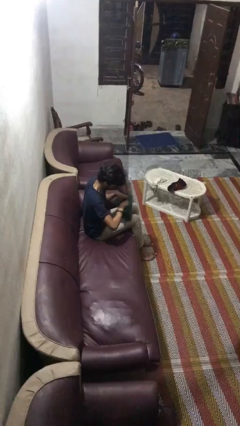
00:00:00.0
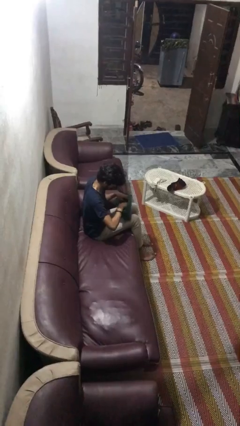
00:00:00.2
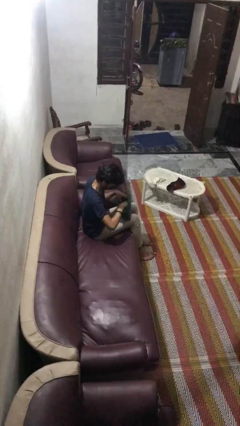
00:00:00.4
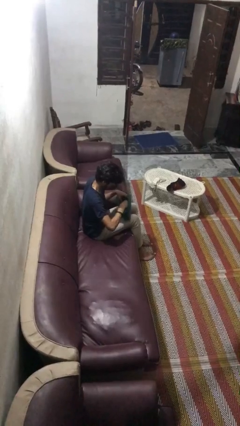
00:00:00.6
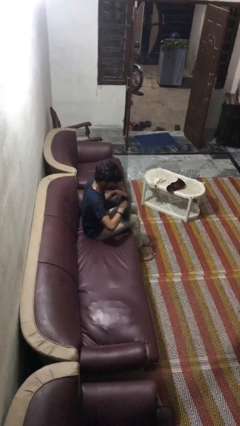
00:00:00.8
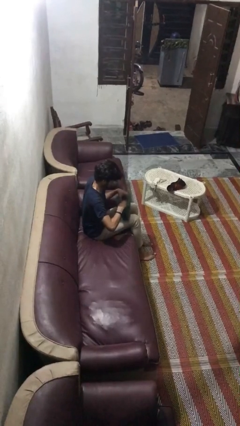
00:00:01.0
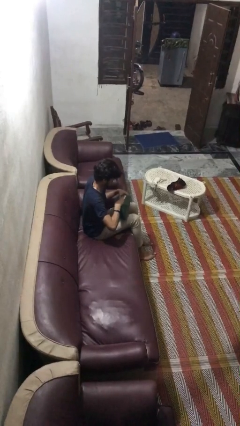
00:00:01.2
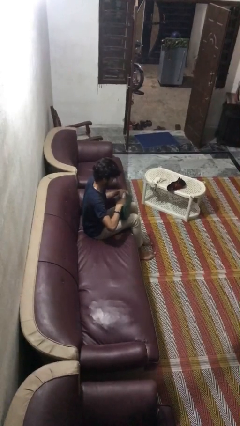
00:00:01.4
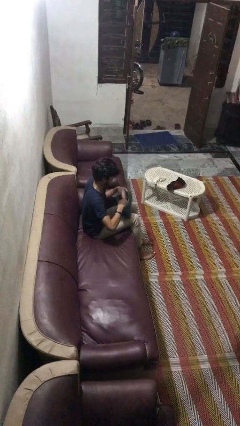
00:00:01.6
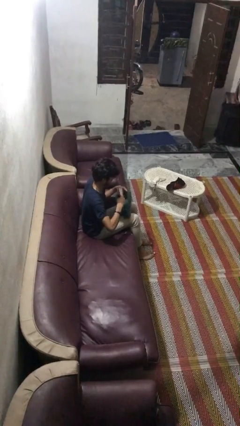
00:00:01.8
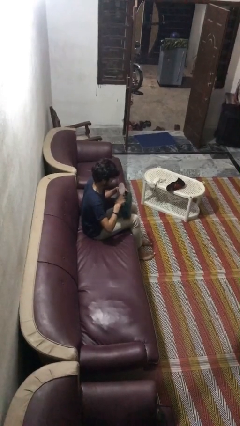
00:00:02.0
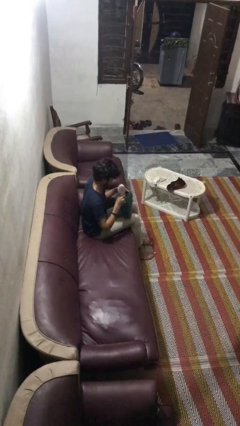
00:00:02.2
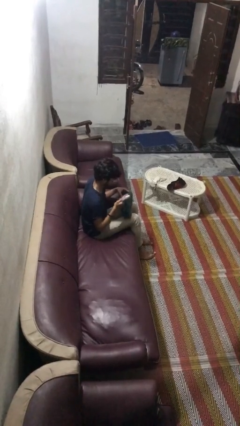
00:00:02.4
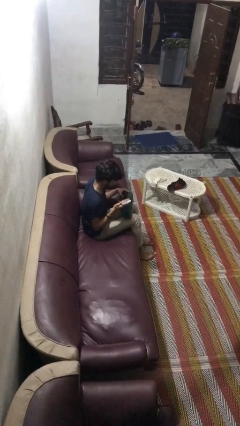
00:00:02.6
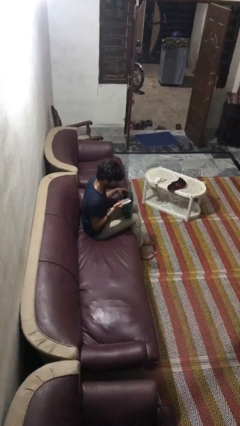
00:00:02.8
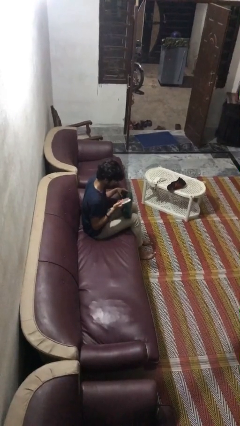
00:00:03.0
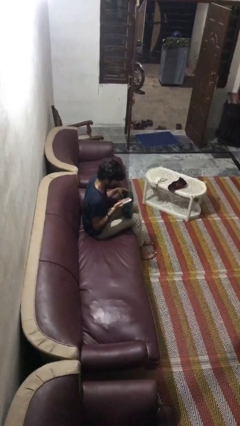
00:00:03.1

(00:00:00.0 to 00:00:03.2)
person takes object from purse

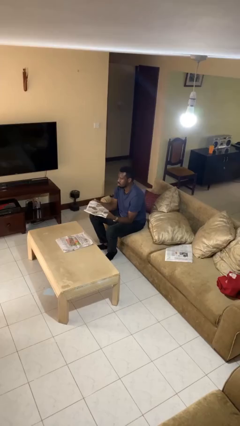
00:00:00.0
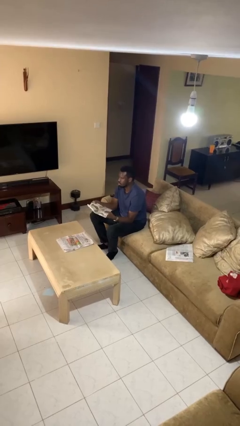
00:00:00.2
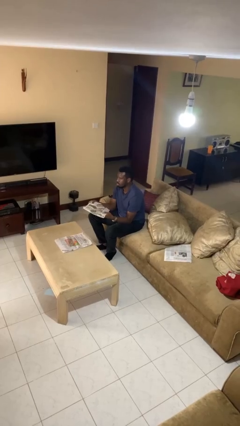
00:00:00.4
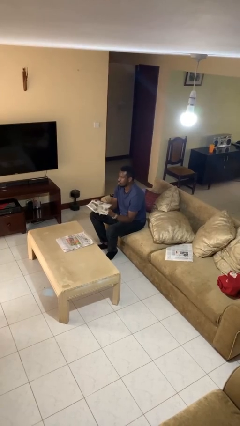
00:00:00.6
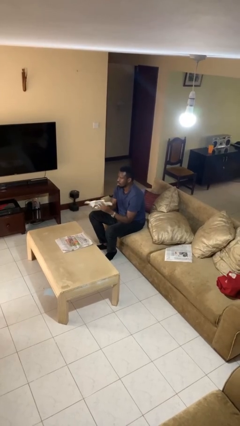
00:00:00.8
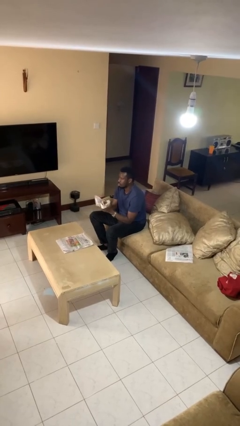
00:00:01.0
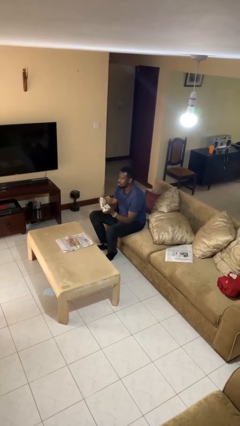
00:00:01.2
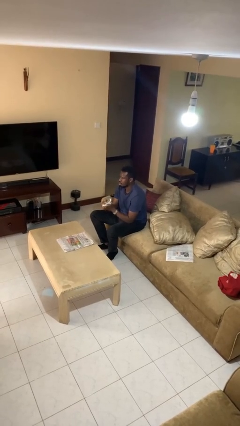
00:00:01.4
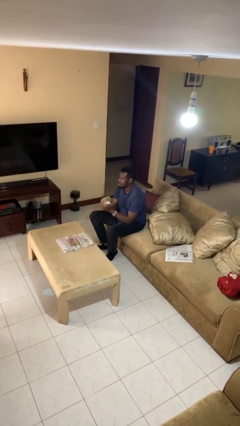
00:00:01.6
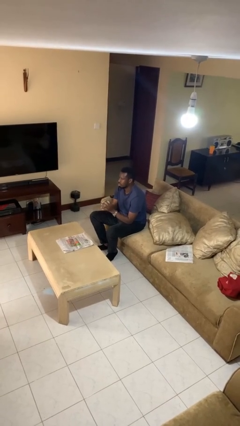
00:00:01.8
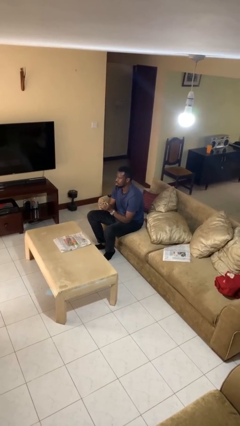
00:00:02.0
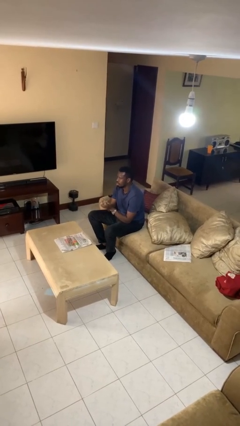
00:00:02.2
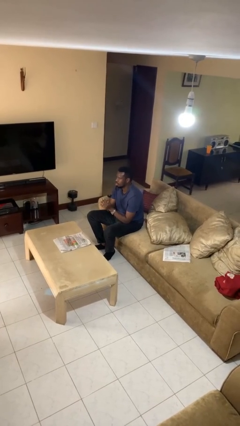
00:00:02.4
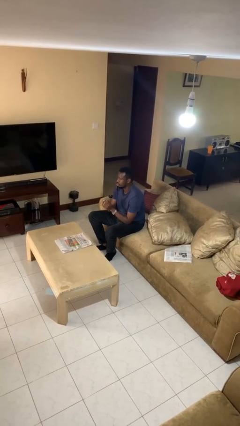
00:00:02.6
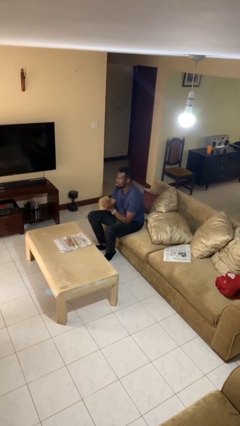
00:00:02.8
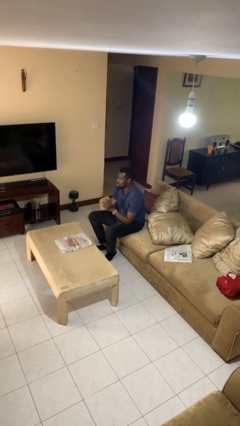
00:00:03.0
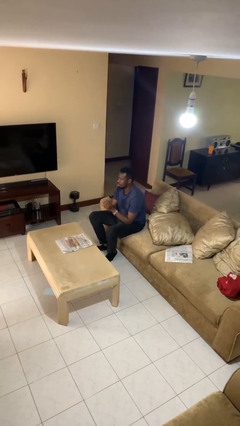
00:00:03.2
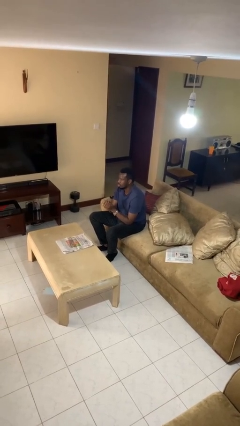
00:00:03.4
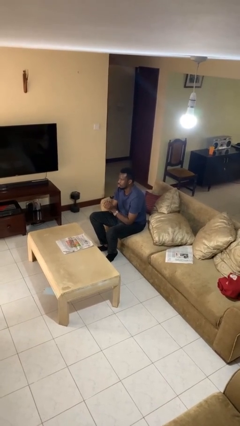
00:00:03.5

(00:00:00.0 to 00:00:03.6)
person crumples paper

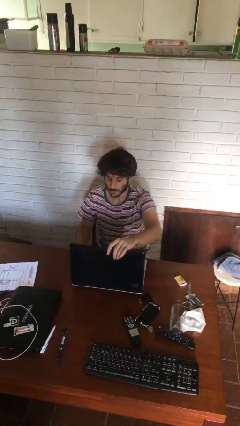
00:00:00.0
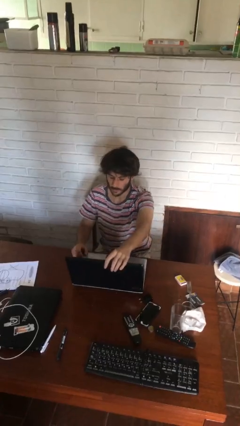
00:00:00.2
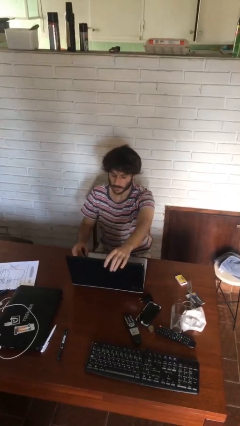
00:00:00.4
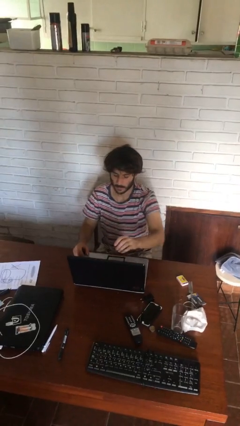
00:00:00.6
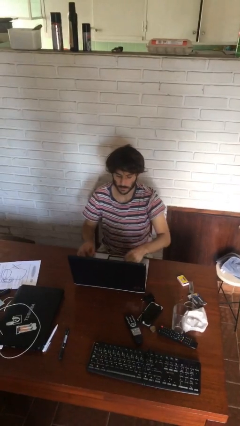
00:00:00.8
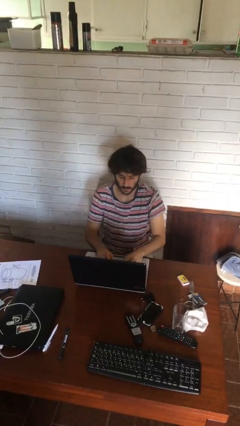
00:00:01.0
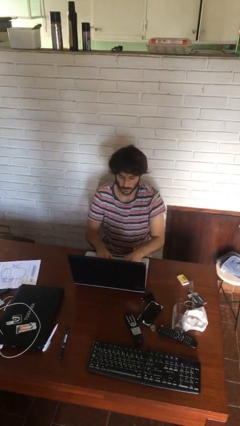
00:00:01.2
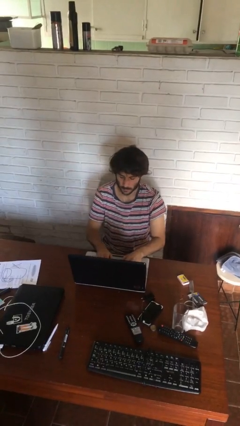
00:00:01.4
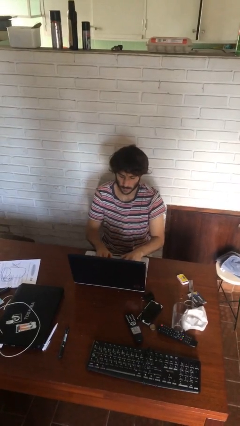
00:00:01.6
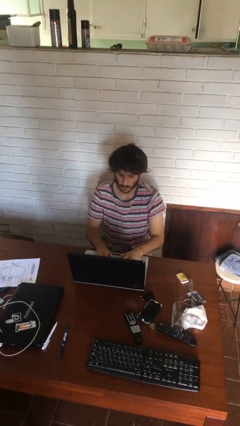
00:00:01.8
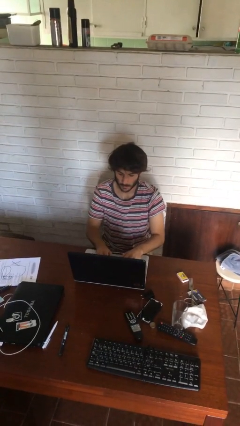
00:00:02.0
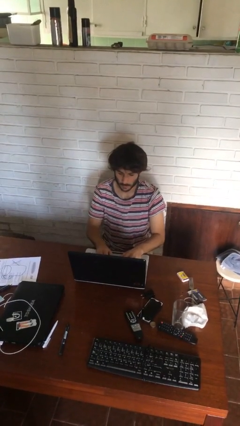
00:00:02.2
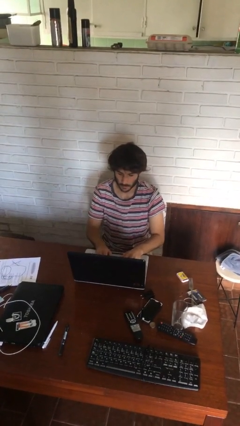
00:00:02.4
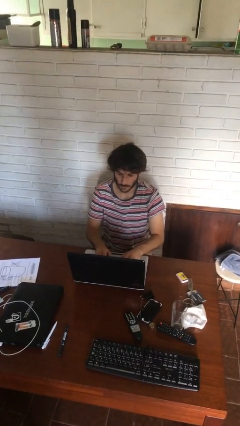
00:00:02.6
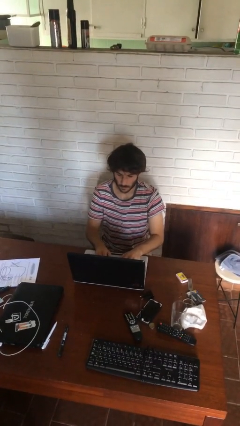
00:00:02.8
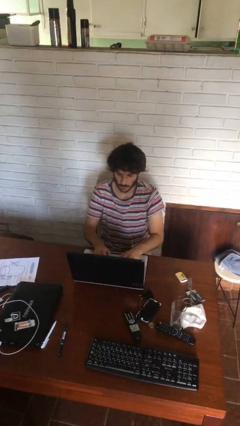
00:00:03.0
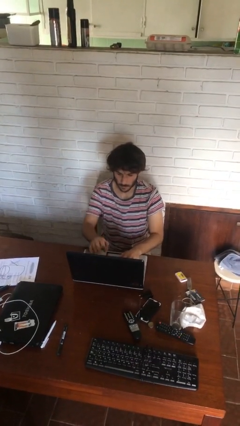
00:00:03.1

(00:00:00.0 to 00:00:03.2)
person interacts with laptop

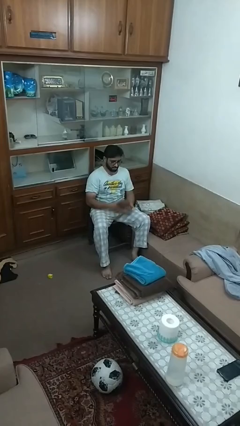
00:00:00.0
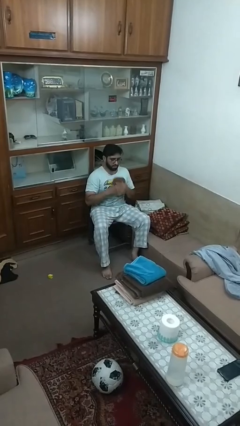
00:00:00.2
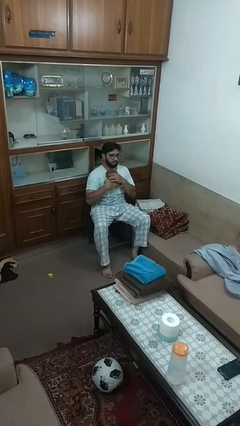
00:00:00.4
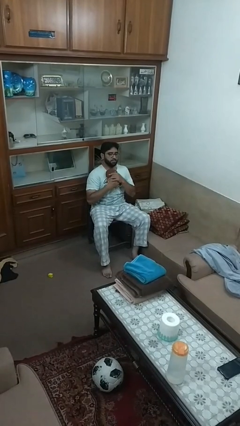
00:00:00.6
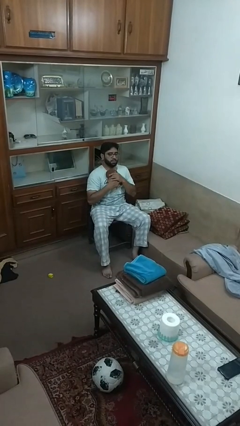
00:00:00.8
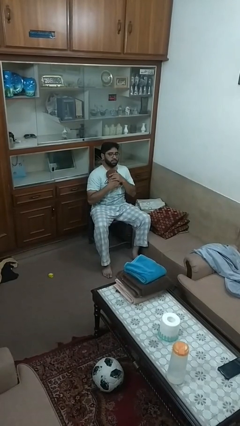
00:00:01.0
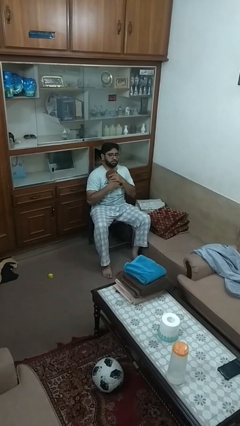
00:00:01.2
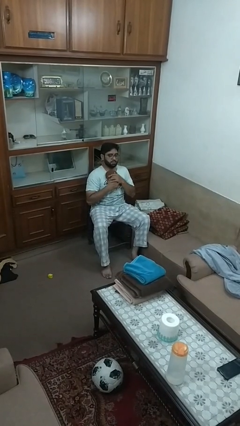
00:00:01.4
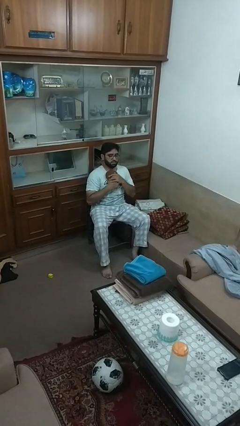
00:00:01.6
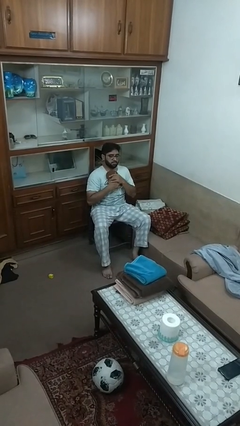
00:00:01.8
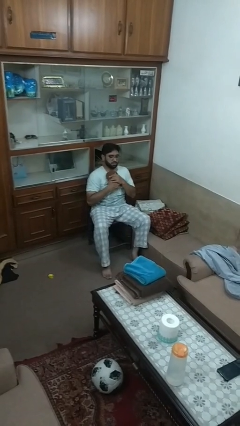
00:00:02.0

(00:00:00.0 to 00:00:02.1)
person hugs stuffed animal

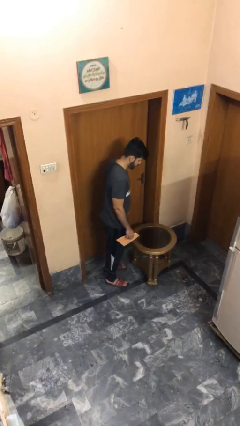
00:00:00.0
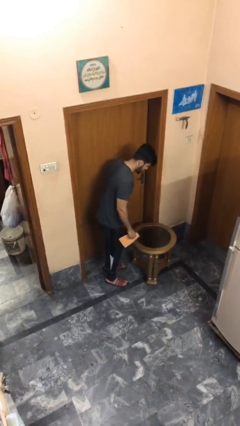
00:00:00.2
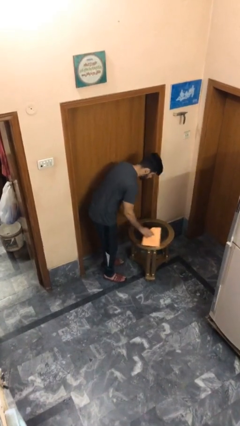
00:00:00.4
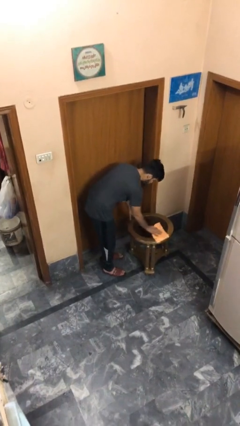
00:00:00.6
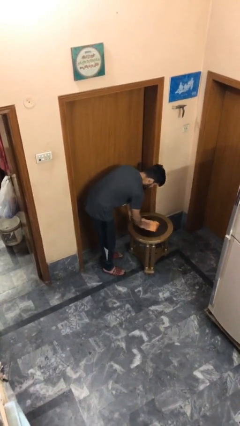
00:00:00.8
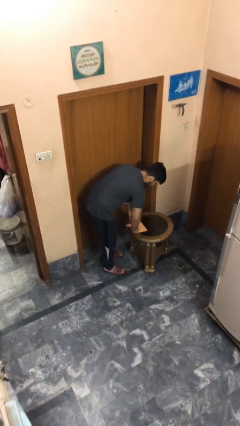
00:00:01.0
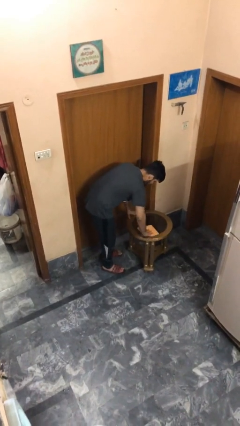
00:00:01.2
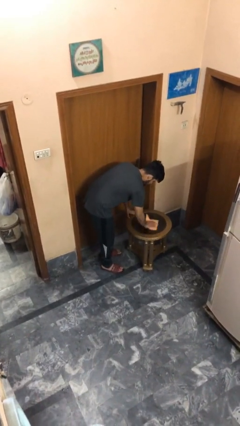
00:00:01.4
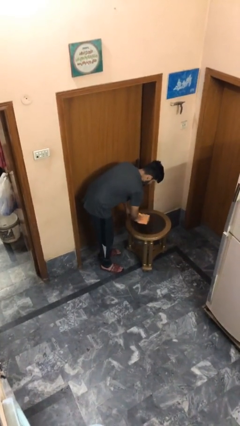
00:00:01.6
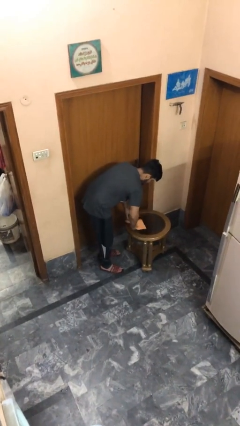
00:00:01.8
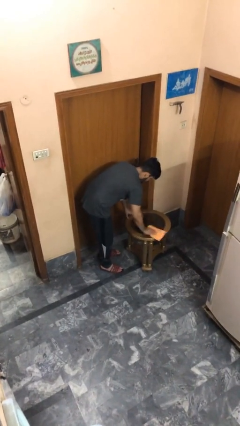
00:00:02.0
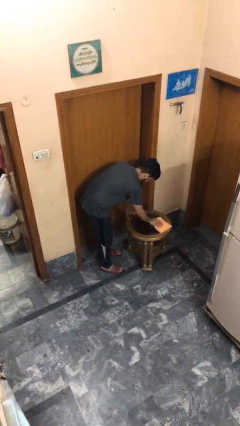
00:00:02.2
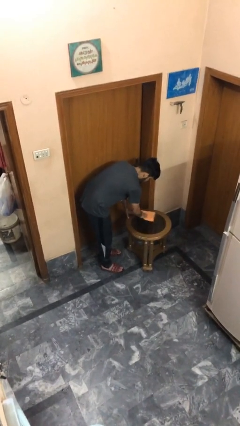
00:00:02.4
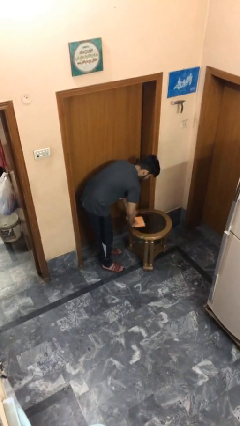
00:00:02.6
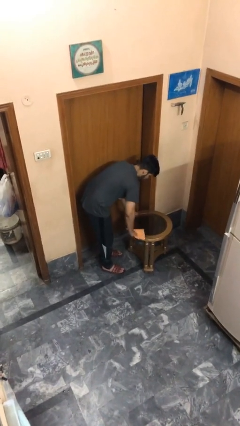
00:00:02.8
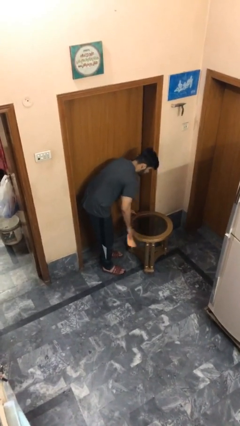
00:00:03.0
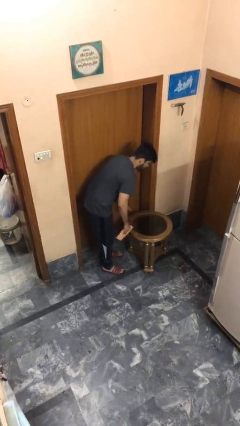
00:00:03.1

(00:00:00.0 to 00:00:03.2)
person cleans table with rag

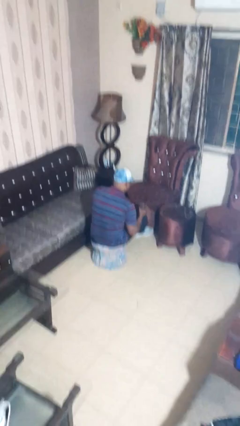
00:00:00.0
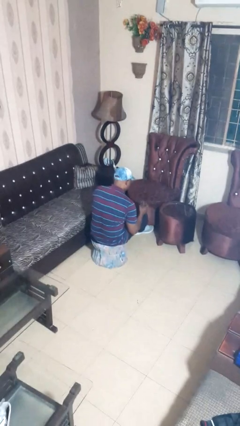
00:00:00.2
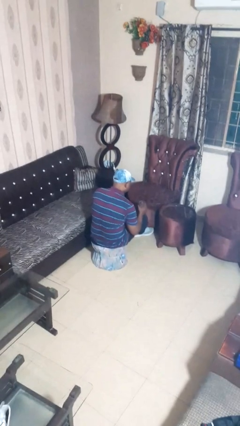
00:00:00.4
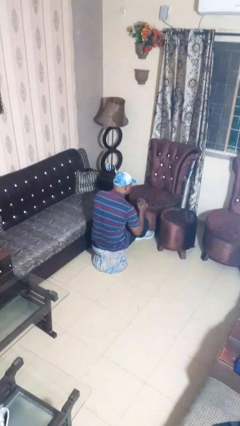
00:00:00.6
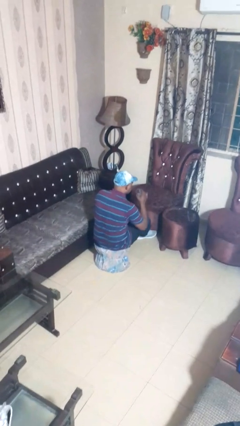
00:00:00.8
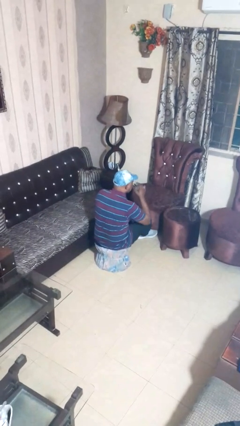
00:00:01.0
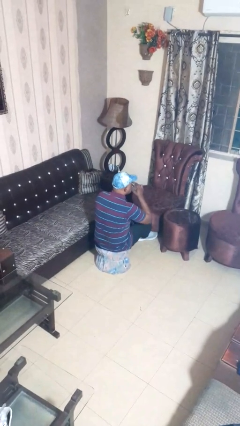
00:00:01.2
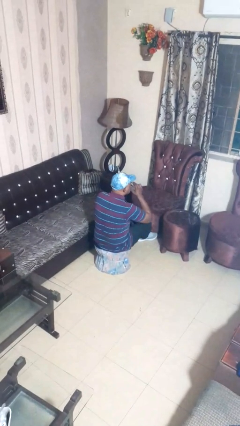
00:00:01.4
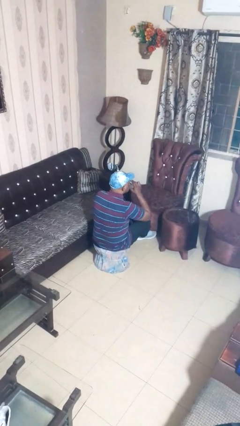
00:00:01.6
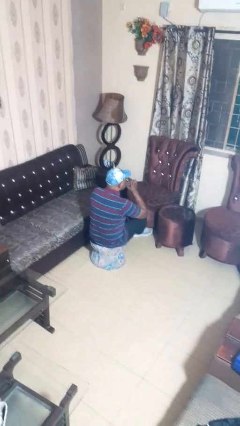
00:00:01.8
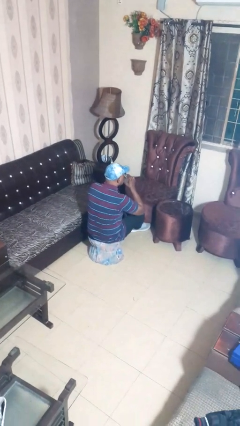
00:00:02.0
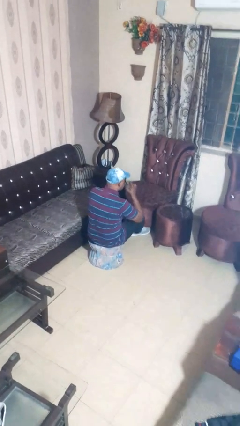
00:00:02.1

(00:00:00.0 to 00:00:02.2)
person drinks from shotglass
